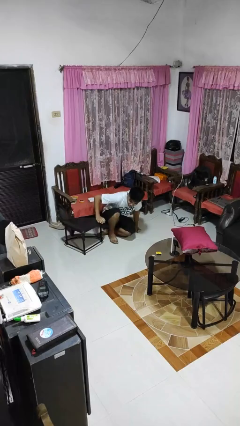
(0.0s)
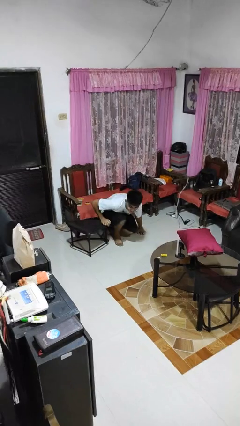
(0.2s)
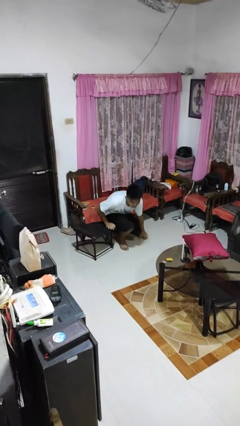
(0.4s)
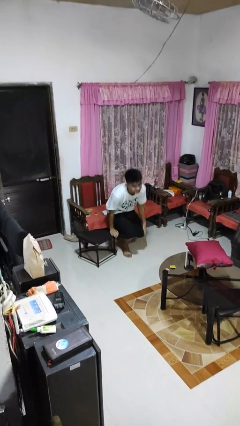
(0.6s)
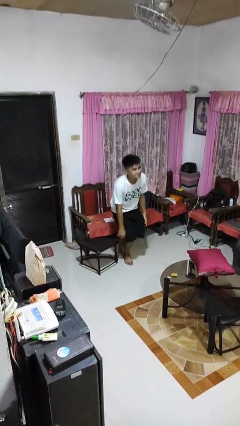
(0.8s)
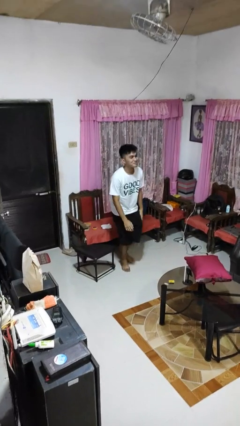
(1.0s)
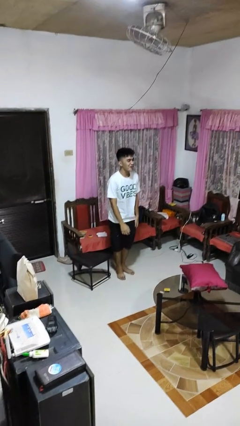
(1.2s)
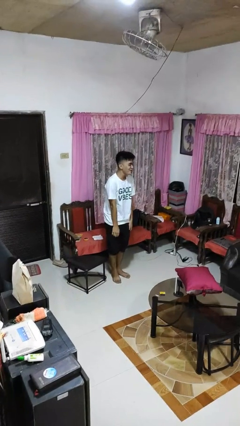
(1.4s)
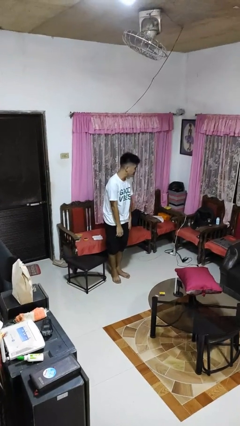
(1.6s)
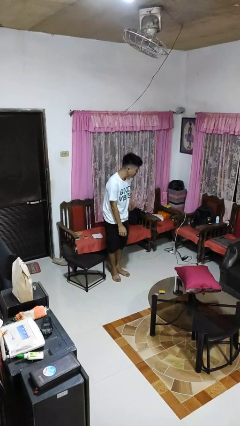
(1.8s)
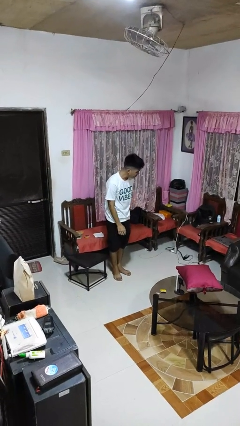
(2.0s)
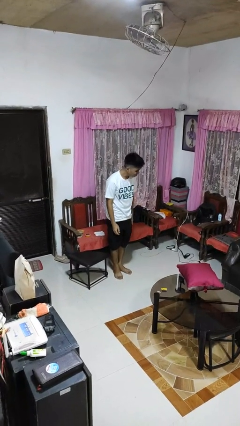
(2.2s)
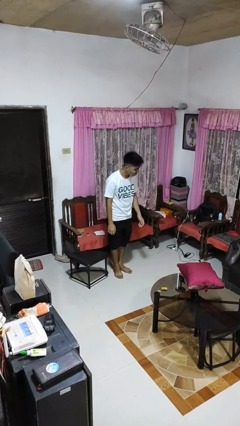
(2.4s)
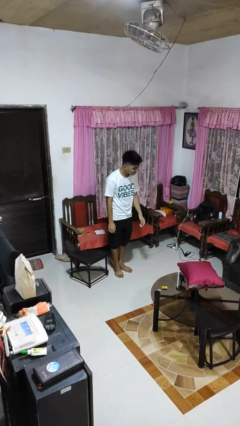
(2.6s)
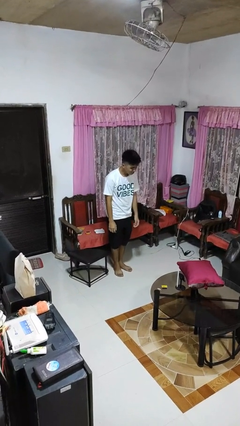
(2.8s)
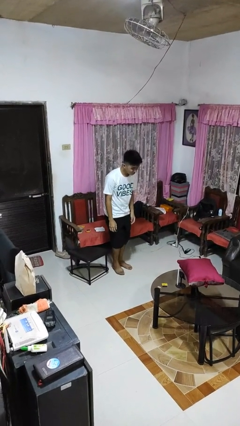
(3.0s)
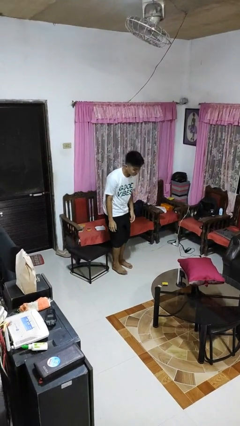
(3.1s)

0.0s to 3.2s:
person stands up from floor

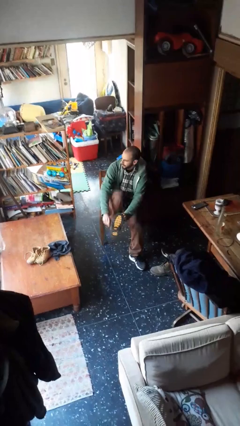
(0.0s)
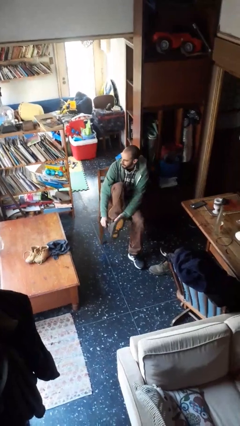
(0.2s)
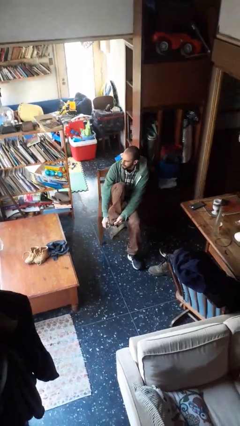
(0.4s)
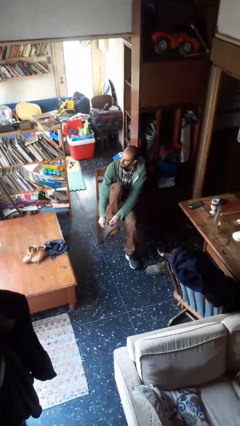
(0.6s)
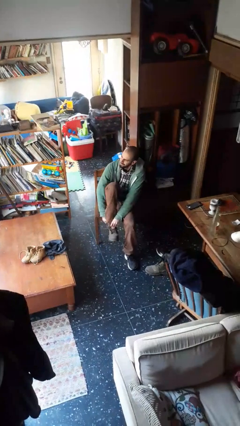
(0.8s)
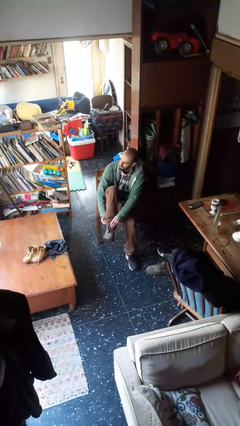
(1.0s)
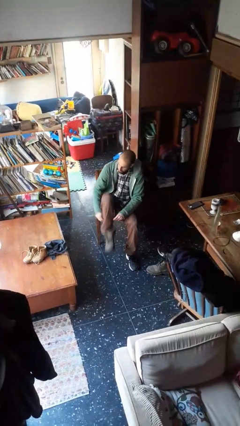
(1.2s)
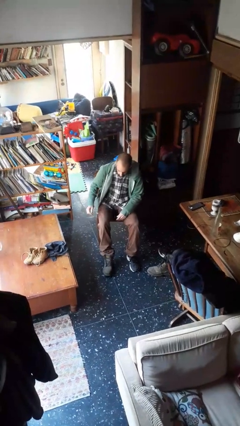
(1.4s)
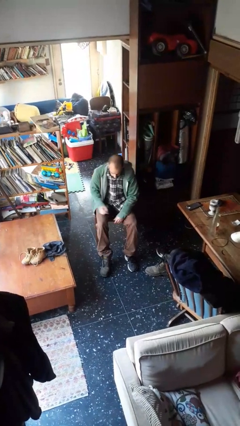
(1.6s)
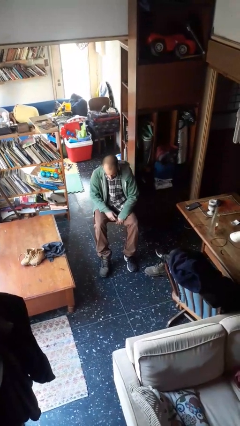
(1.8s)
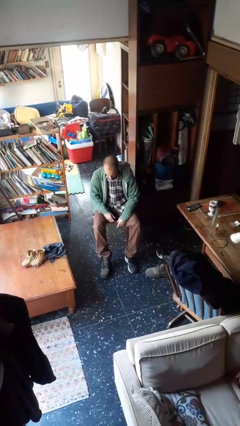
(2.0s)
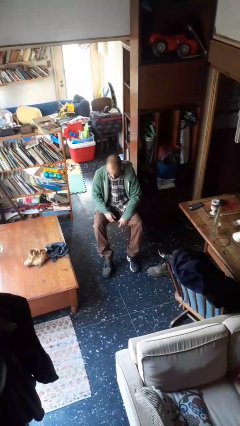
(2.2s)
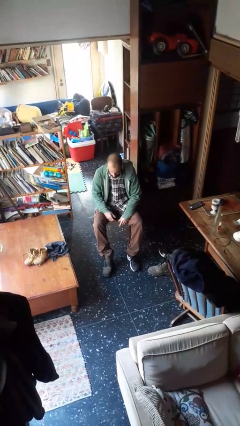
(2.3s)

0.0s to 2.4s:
person puts on boots

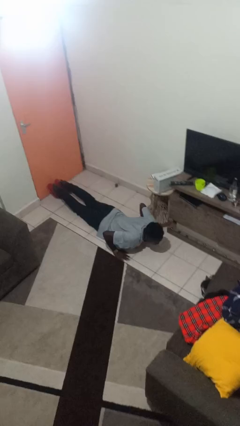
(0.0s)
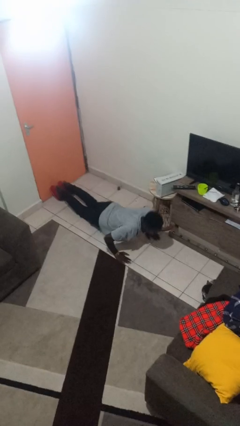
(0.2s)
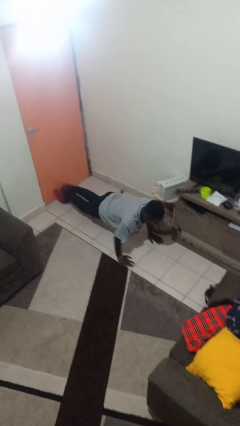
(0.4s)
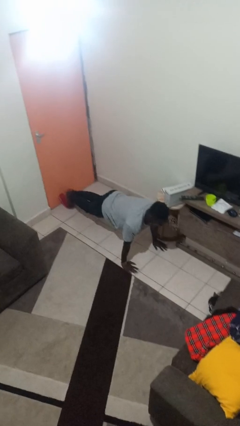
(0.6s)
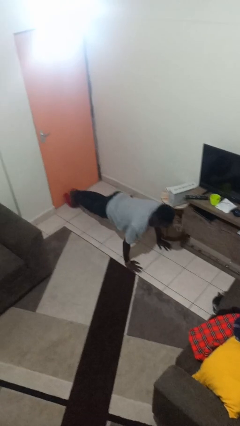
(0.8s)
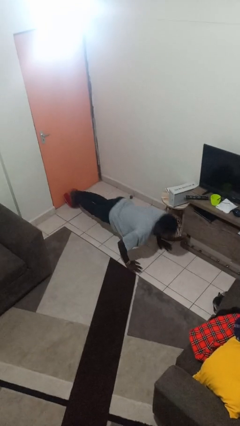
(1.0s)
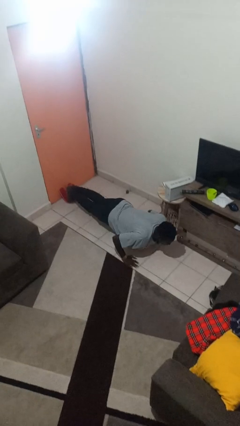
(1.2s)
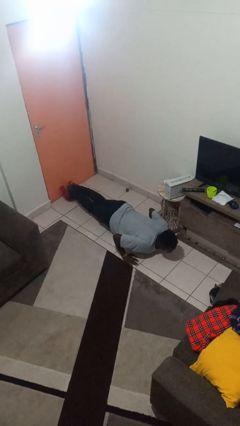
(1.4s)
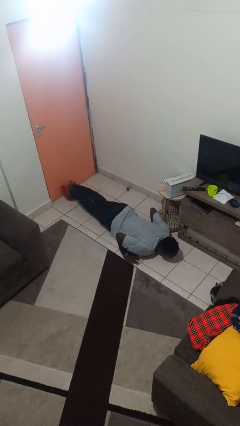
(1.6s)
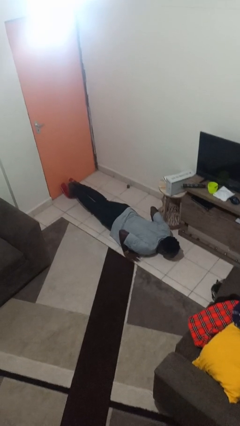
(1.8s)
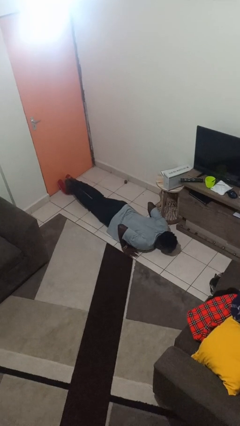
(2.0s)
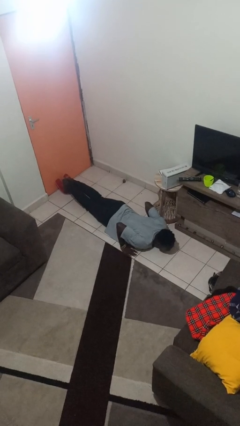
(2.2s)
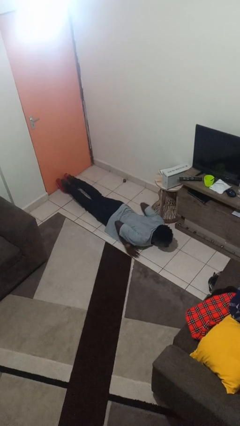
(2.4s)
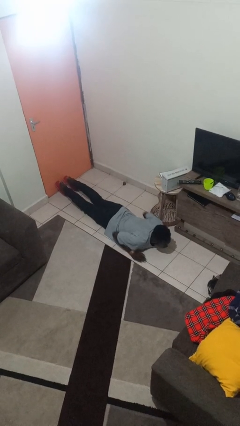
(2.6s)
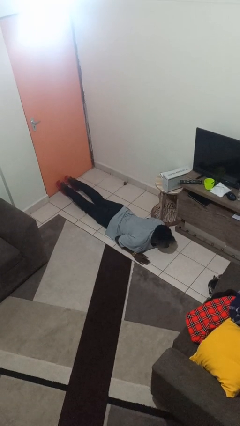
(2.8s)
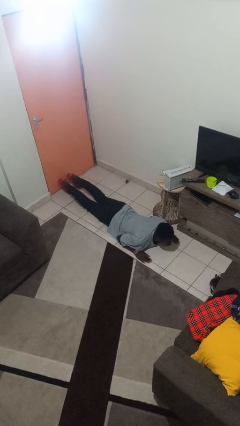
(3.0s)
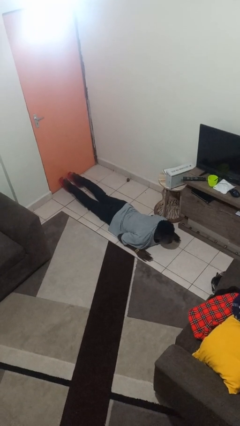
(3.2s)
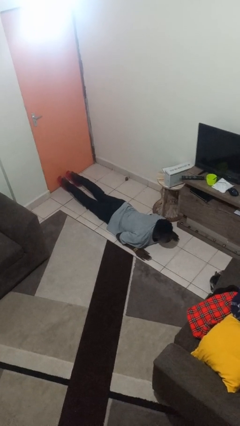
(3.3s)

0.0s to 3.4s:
person exercises with pushup

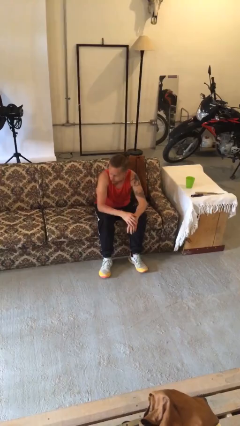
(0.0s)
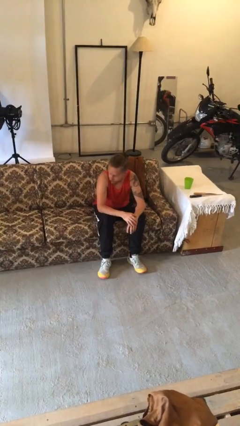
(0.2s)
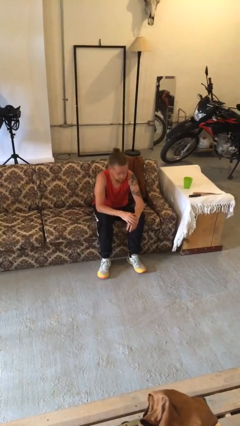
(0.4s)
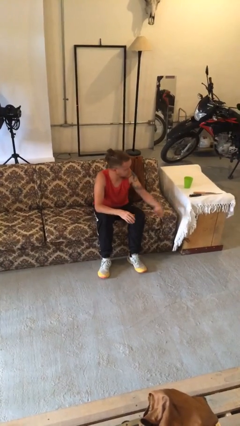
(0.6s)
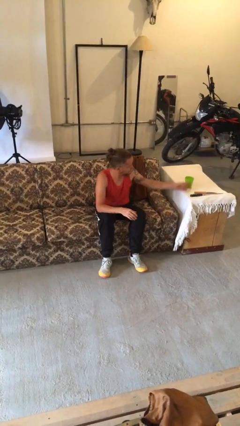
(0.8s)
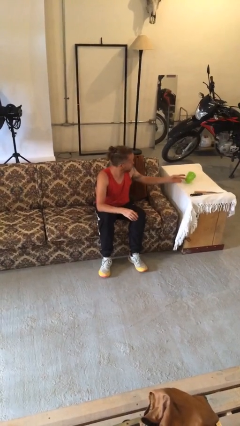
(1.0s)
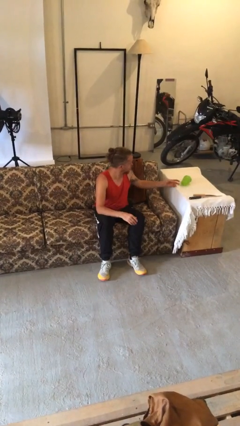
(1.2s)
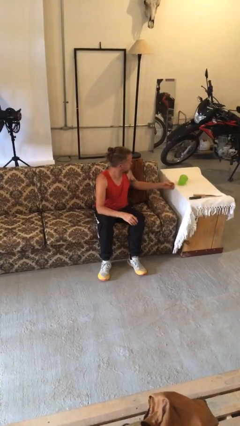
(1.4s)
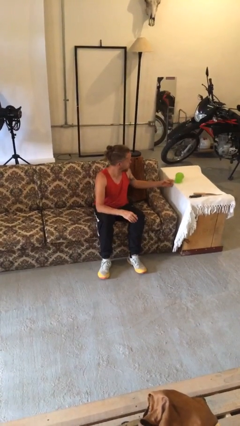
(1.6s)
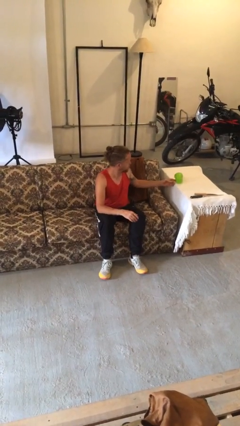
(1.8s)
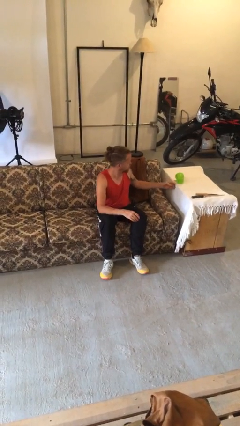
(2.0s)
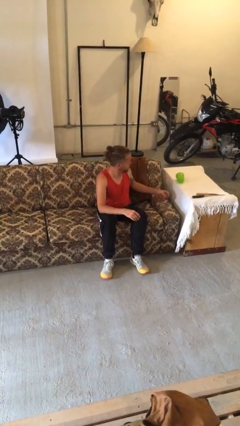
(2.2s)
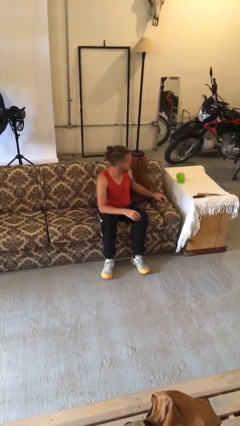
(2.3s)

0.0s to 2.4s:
person knocks over glass

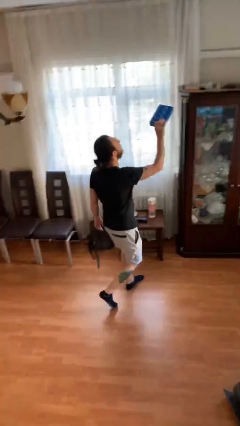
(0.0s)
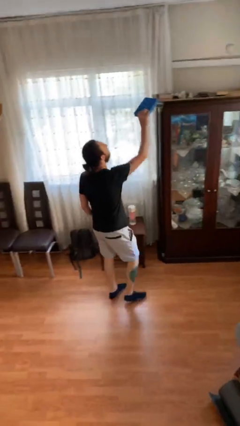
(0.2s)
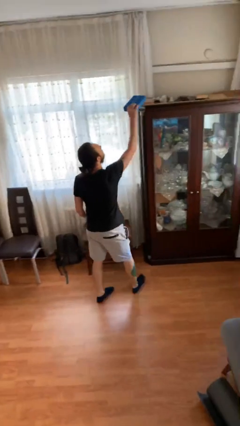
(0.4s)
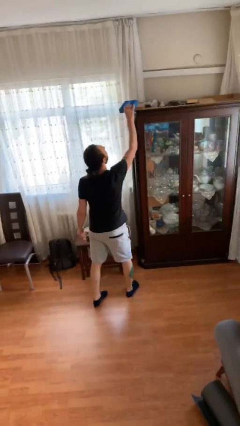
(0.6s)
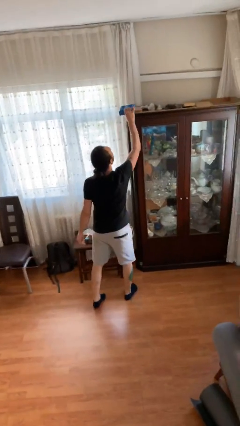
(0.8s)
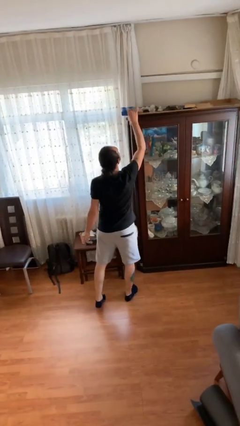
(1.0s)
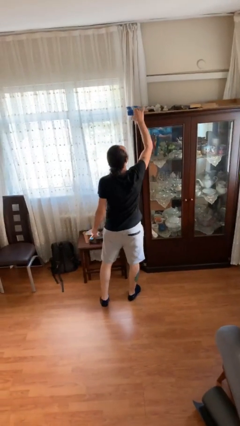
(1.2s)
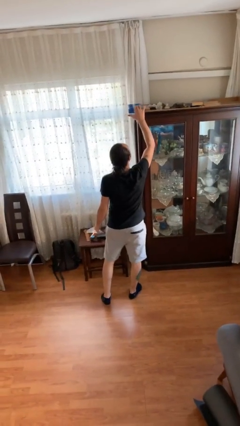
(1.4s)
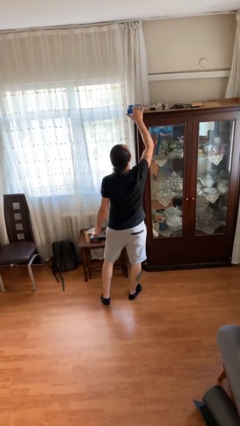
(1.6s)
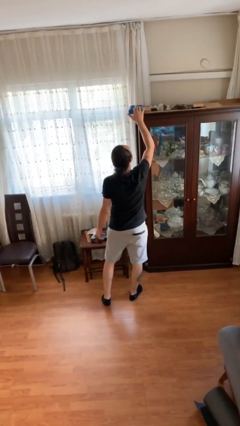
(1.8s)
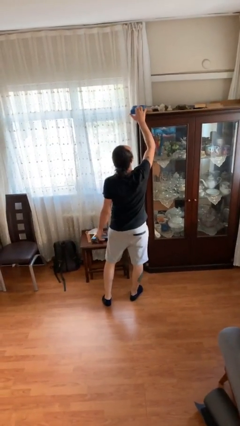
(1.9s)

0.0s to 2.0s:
person puts down object on shelf

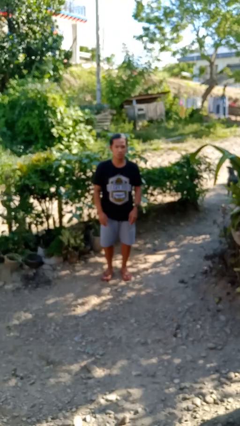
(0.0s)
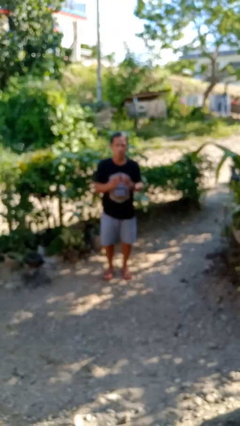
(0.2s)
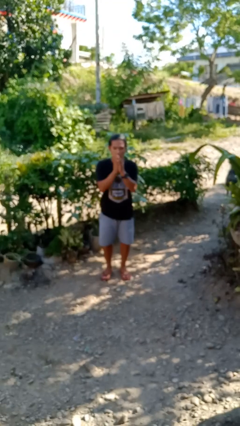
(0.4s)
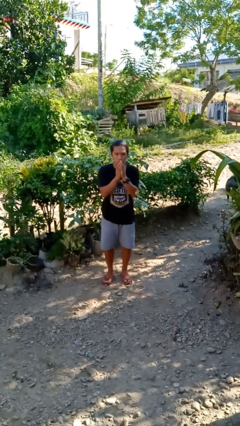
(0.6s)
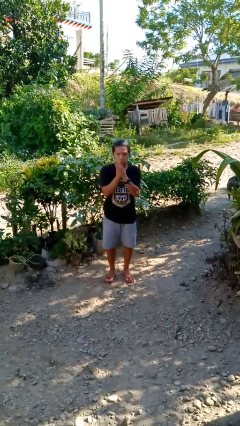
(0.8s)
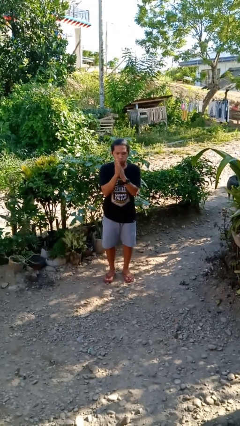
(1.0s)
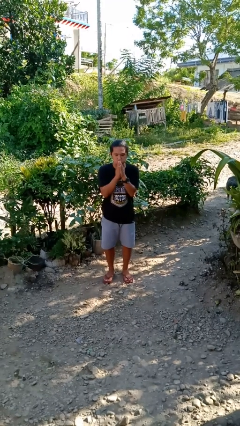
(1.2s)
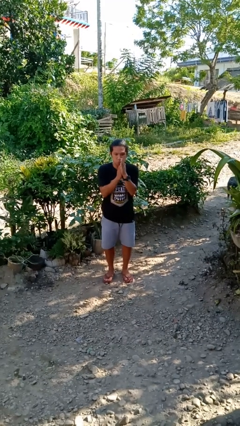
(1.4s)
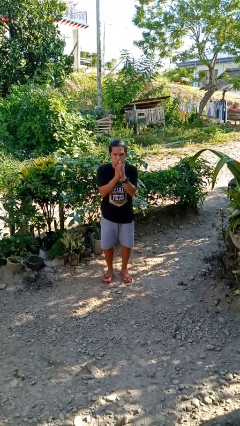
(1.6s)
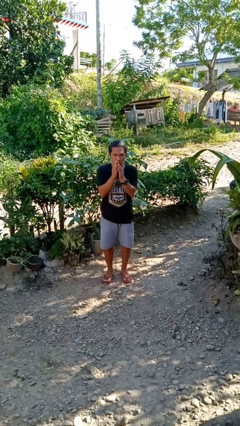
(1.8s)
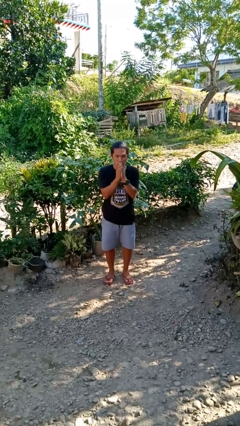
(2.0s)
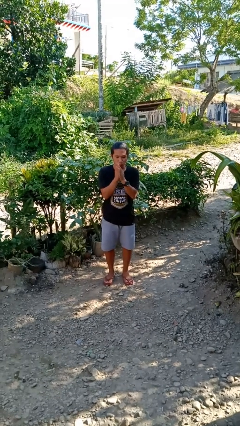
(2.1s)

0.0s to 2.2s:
person blows into hands

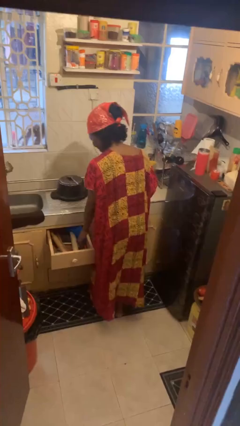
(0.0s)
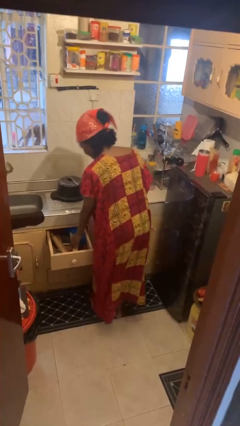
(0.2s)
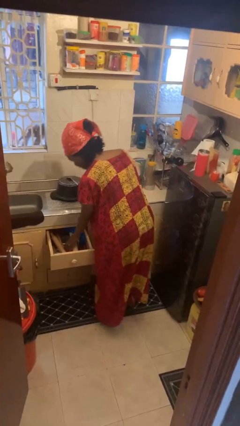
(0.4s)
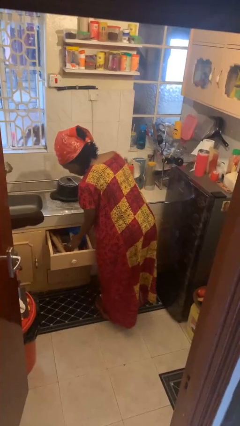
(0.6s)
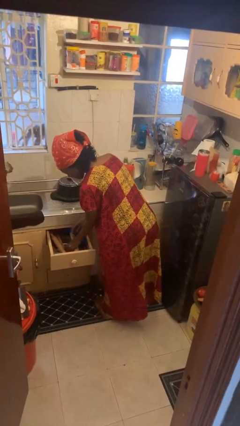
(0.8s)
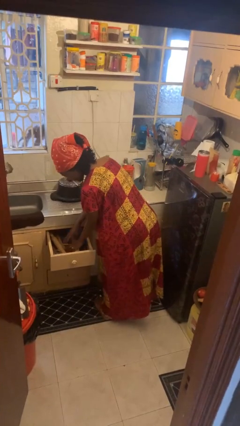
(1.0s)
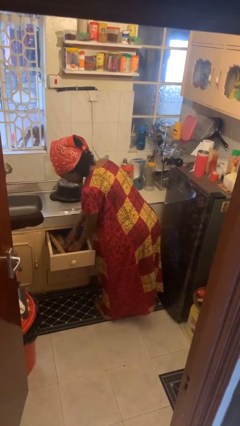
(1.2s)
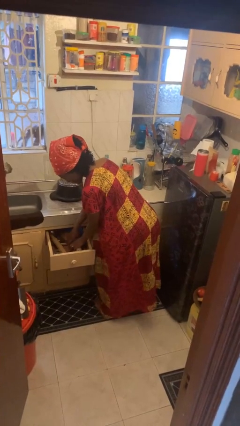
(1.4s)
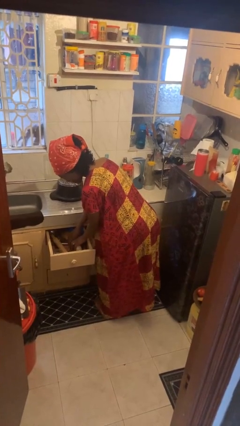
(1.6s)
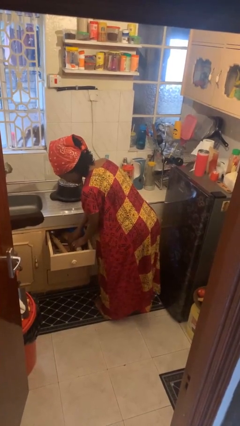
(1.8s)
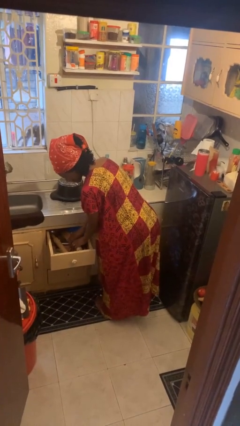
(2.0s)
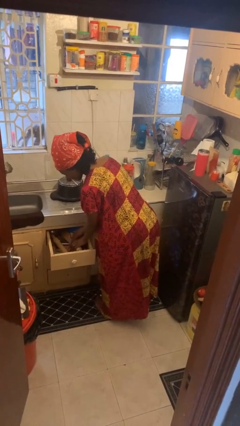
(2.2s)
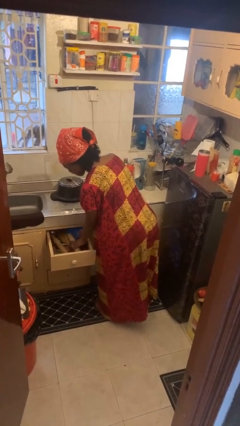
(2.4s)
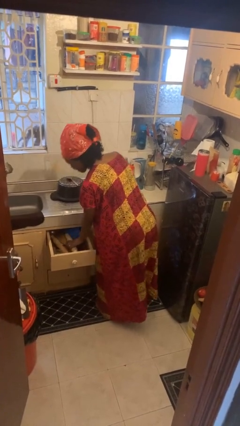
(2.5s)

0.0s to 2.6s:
person searches in kitchen drawer
